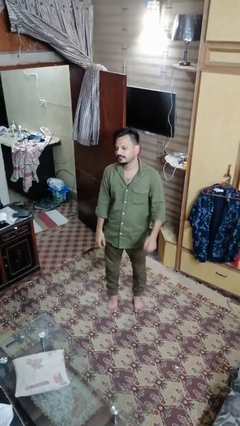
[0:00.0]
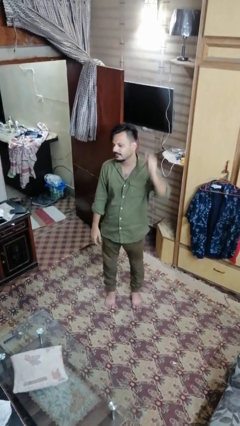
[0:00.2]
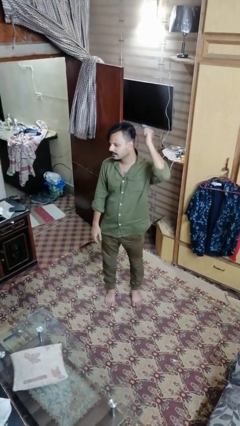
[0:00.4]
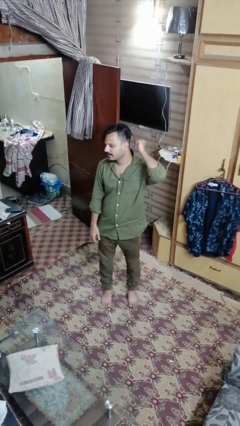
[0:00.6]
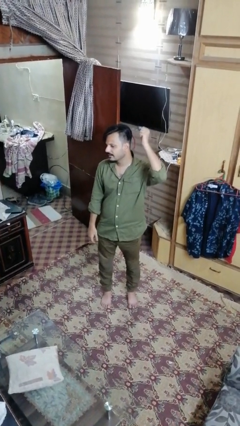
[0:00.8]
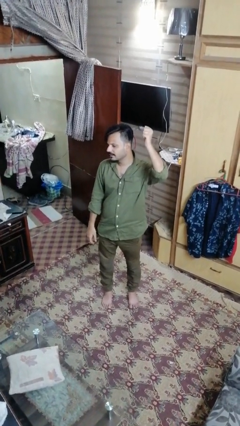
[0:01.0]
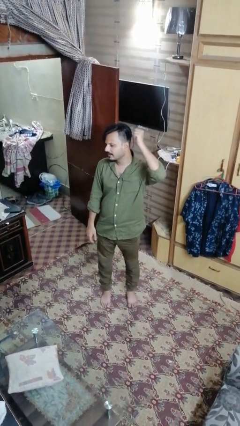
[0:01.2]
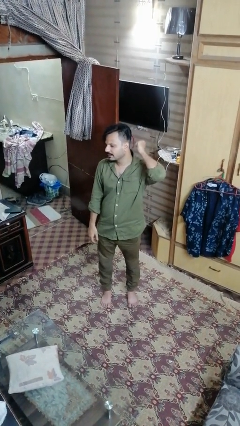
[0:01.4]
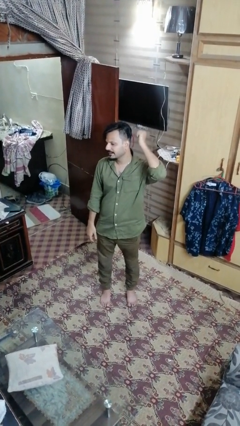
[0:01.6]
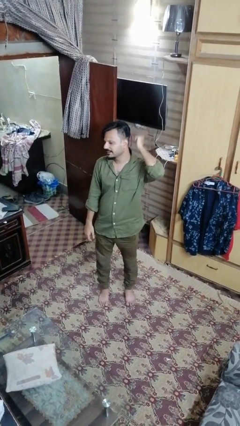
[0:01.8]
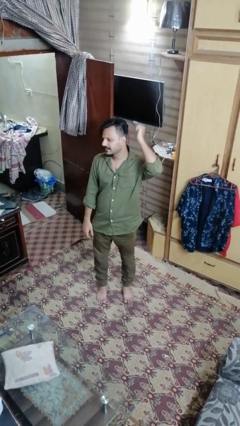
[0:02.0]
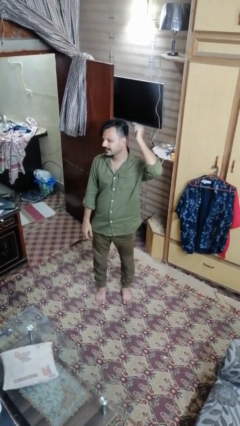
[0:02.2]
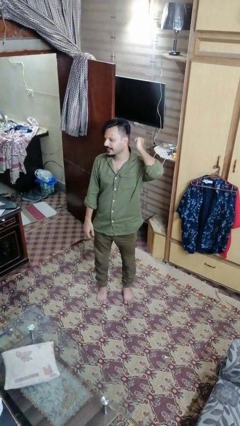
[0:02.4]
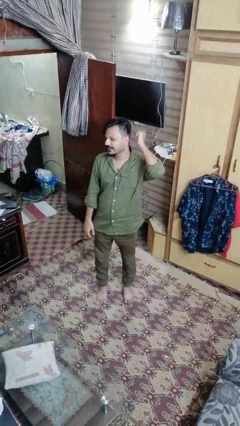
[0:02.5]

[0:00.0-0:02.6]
person gestures behind me

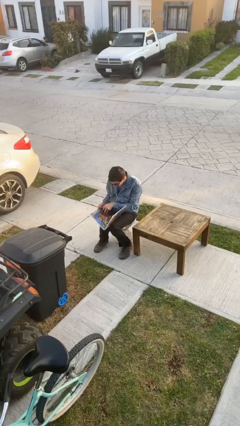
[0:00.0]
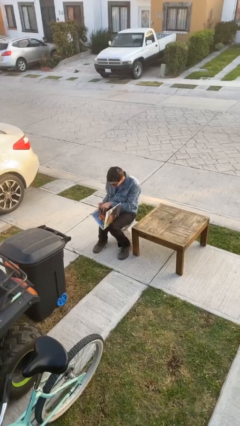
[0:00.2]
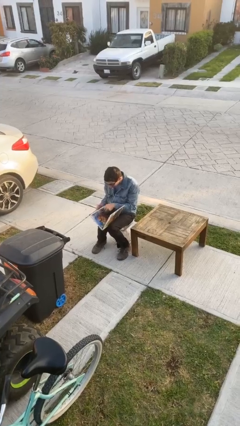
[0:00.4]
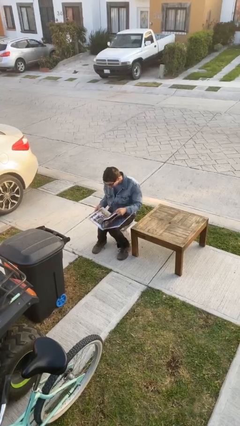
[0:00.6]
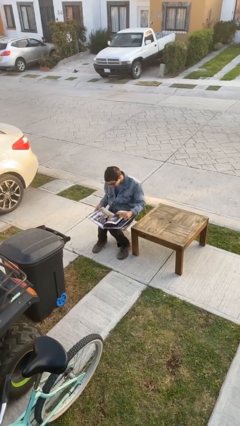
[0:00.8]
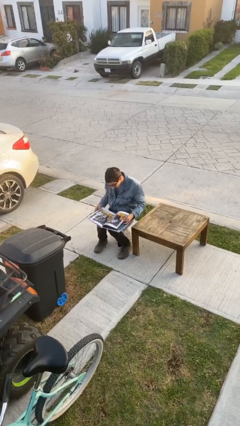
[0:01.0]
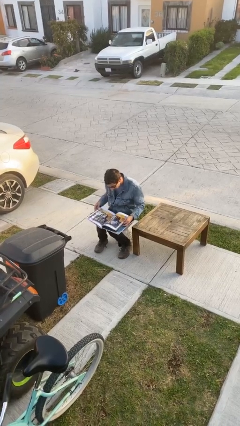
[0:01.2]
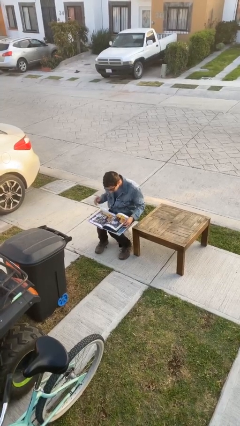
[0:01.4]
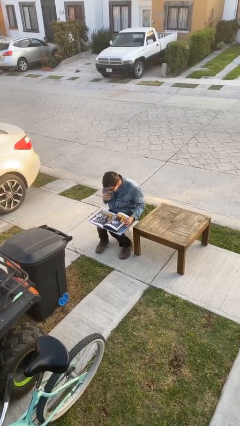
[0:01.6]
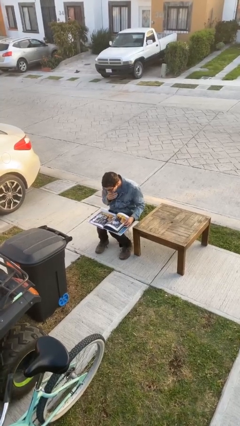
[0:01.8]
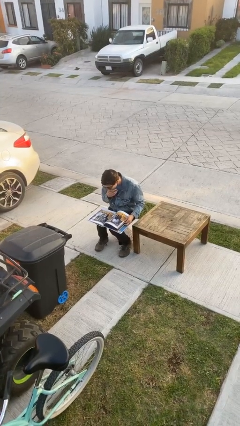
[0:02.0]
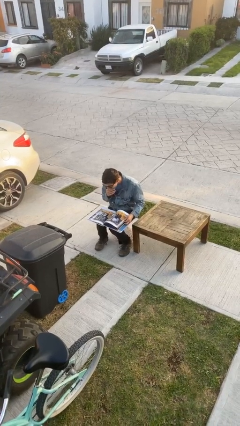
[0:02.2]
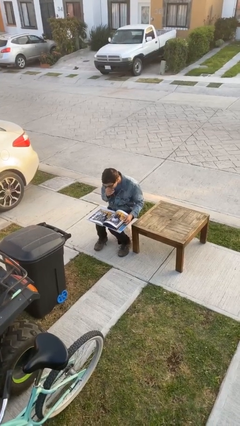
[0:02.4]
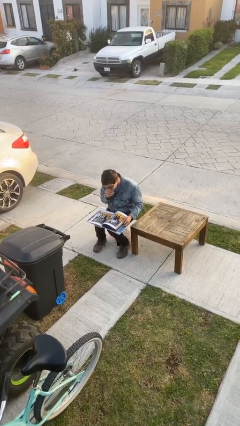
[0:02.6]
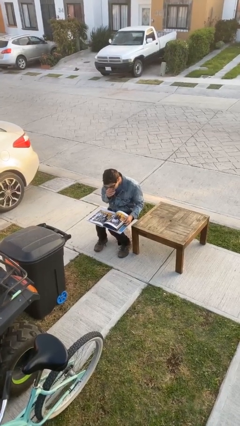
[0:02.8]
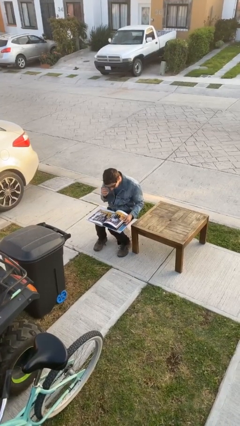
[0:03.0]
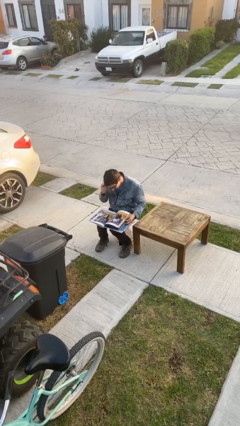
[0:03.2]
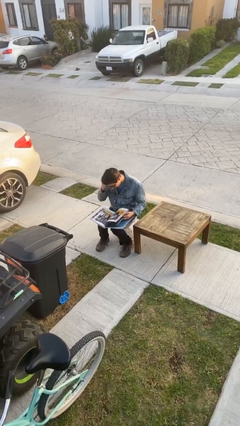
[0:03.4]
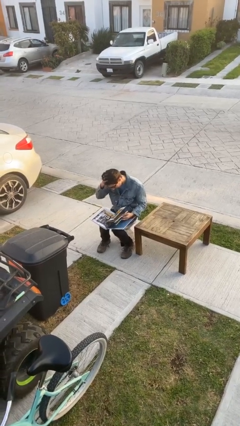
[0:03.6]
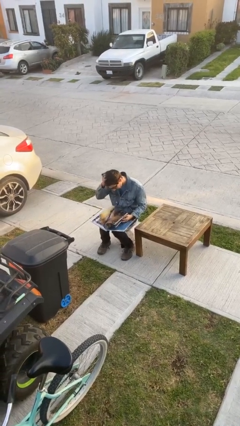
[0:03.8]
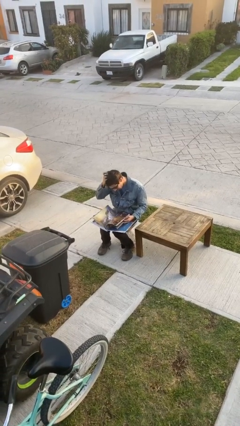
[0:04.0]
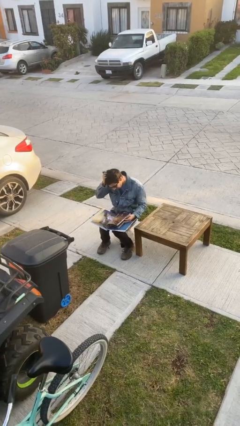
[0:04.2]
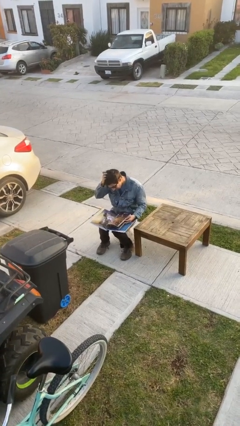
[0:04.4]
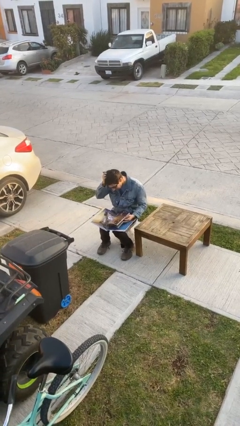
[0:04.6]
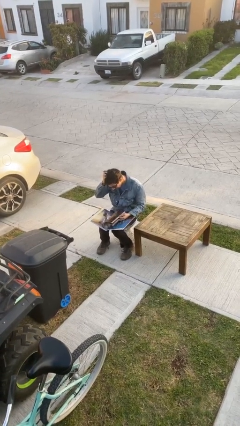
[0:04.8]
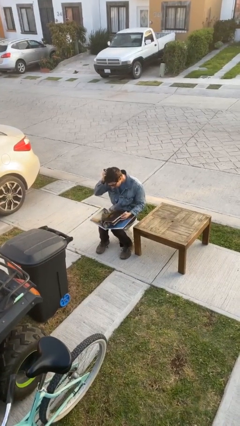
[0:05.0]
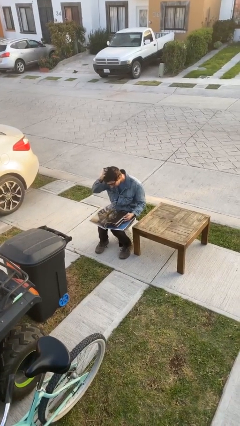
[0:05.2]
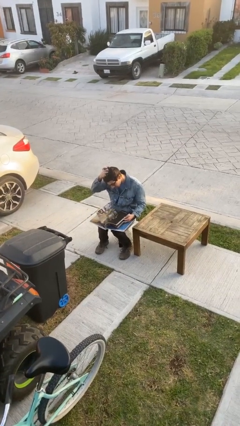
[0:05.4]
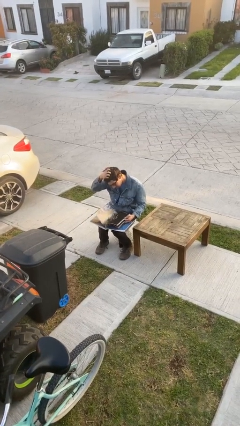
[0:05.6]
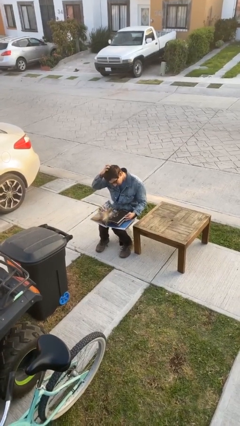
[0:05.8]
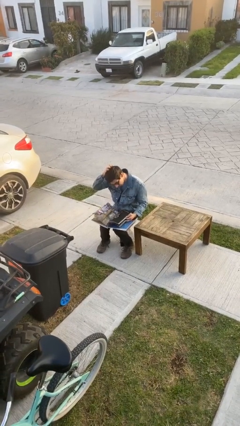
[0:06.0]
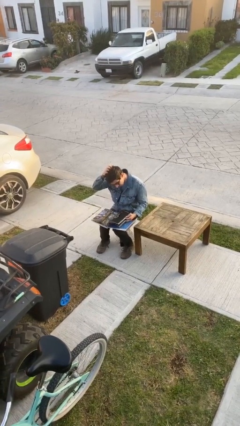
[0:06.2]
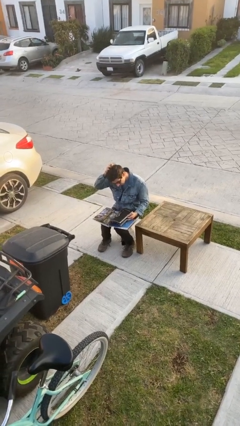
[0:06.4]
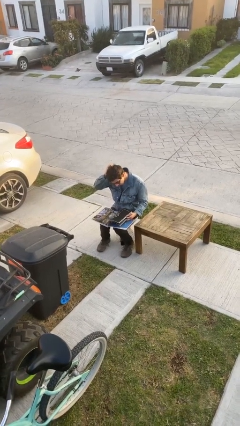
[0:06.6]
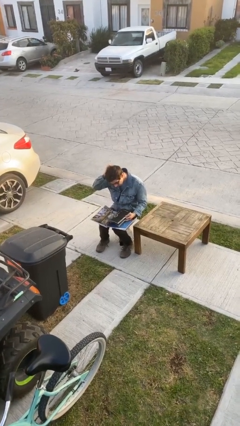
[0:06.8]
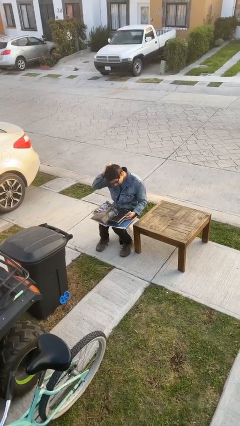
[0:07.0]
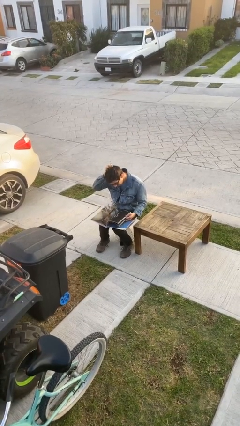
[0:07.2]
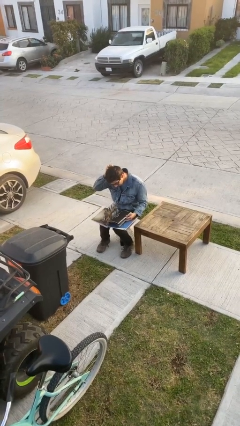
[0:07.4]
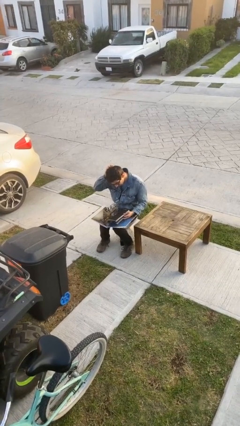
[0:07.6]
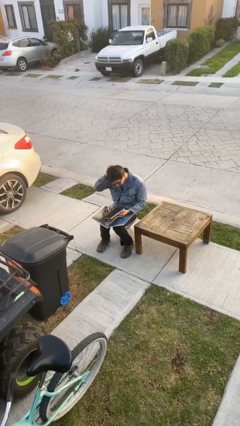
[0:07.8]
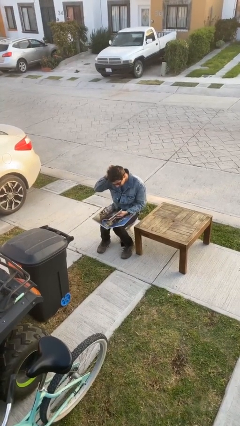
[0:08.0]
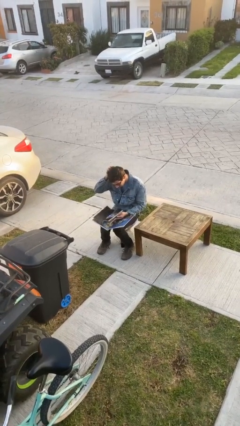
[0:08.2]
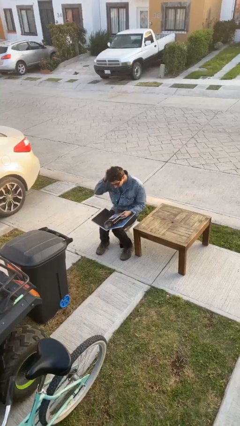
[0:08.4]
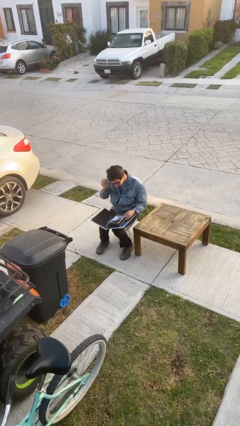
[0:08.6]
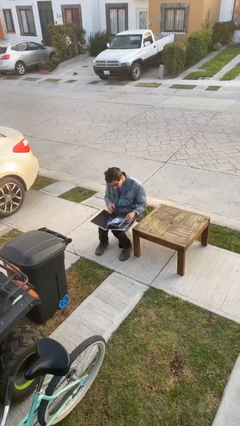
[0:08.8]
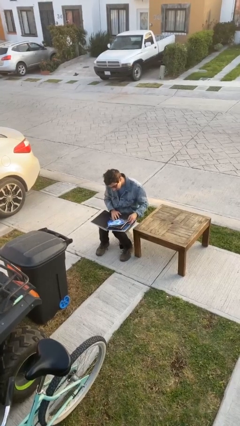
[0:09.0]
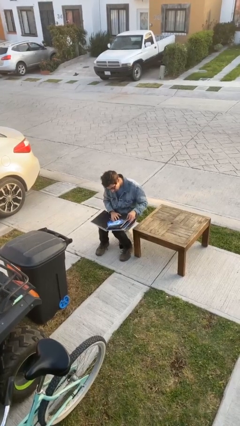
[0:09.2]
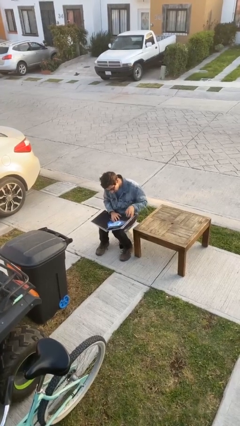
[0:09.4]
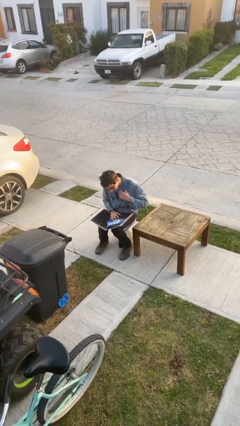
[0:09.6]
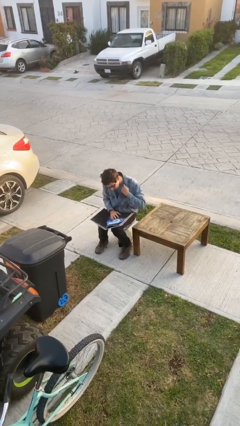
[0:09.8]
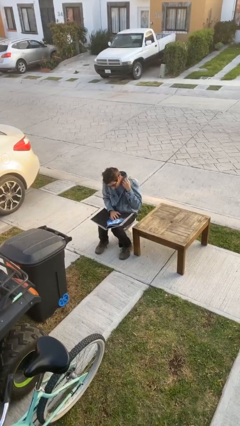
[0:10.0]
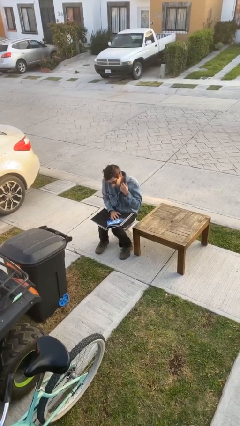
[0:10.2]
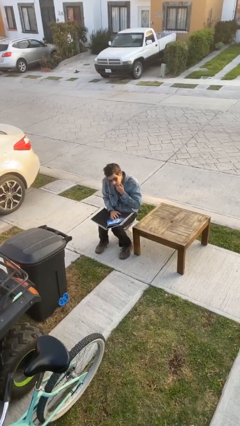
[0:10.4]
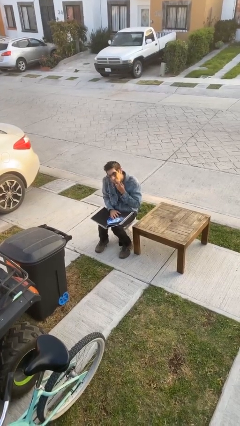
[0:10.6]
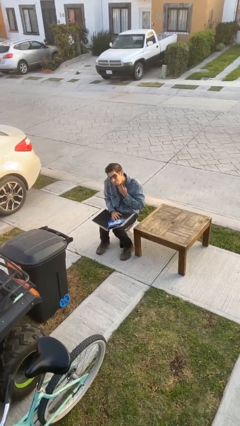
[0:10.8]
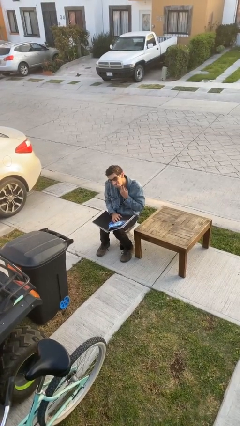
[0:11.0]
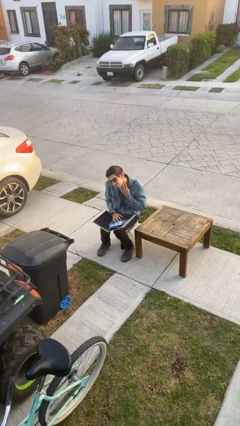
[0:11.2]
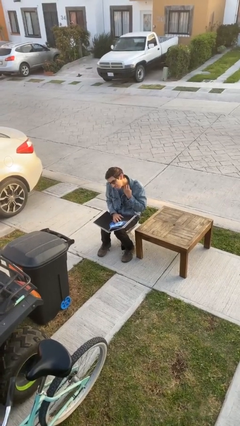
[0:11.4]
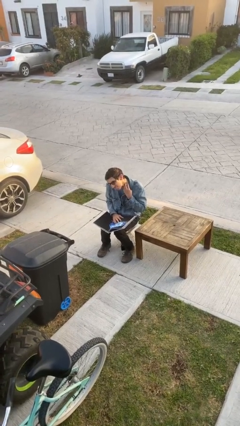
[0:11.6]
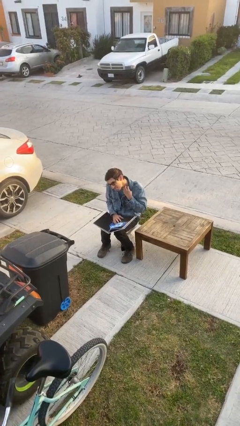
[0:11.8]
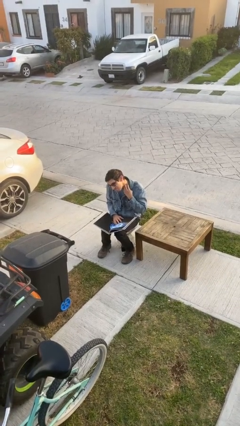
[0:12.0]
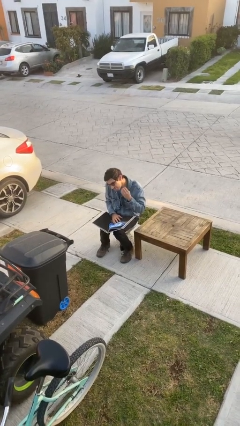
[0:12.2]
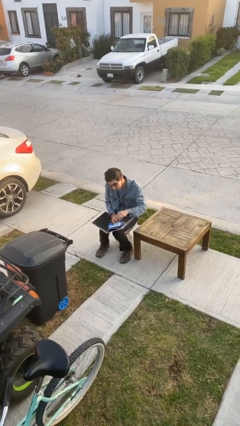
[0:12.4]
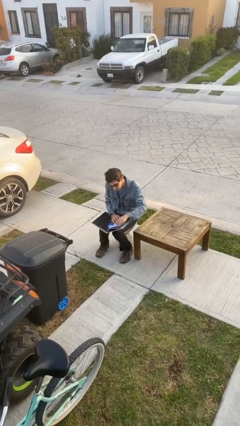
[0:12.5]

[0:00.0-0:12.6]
person reads document

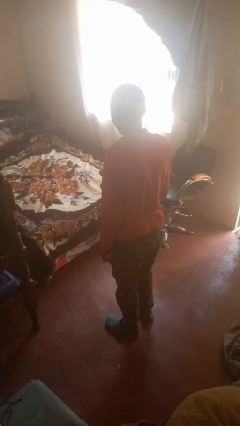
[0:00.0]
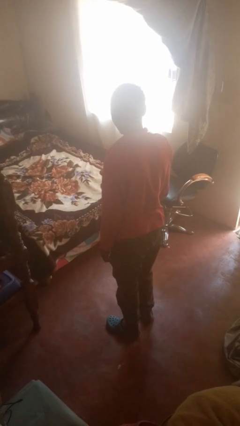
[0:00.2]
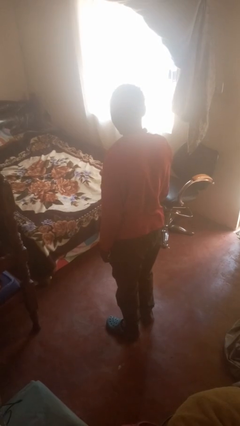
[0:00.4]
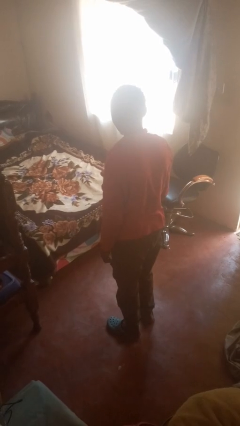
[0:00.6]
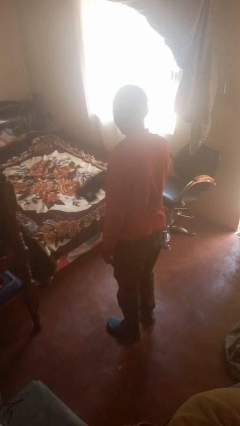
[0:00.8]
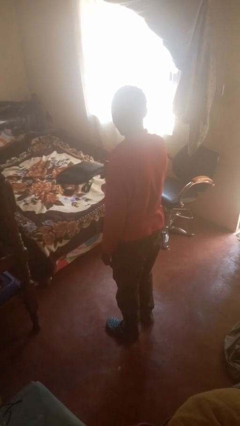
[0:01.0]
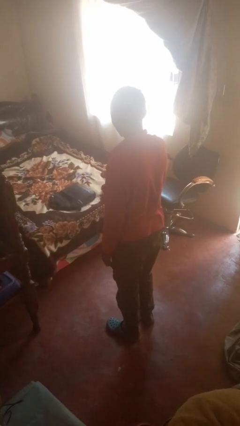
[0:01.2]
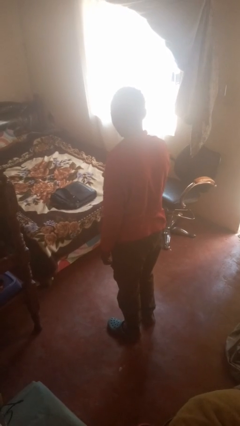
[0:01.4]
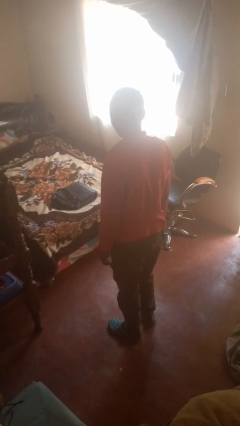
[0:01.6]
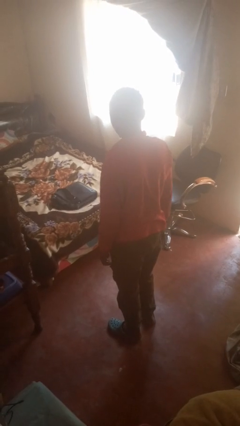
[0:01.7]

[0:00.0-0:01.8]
person throws object on bed

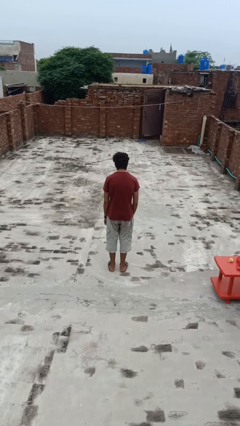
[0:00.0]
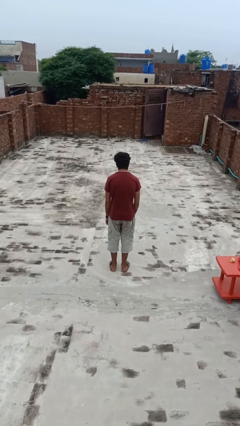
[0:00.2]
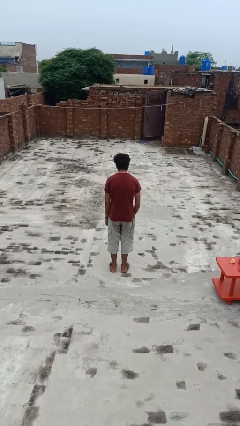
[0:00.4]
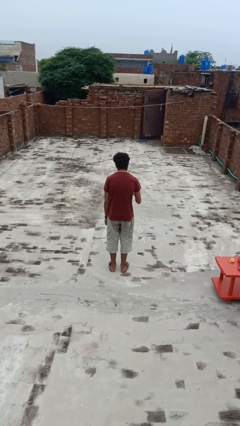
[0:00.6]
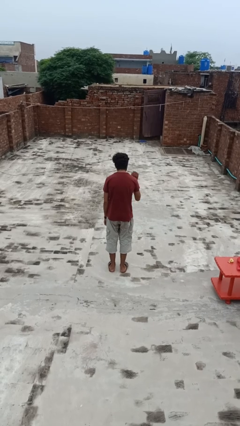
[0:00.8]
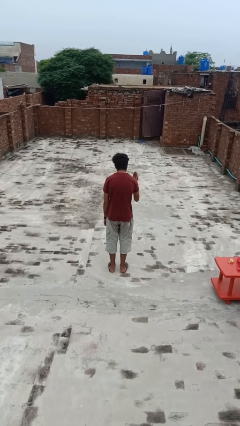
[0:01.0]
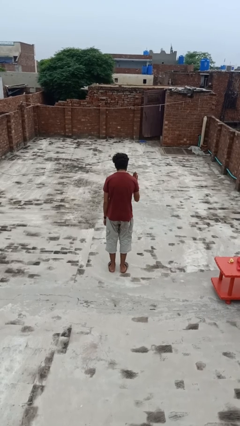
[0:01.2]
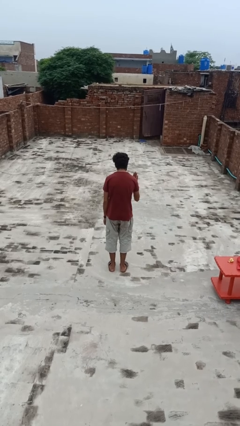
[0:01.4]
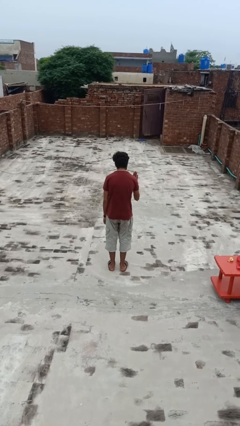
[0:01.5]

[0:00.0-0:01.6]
person gestures stop
